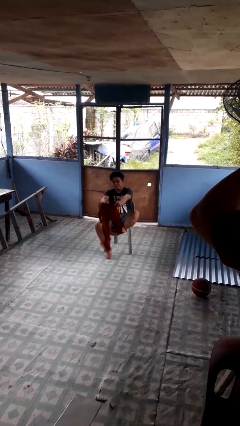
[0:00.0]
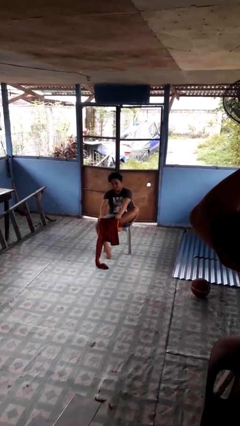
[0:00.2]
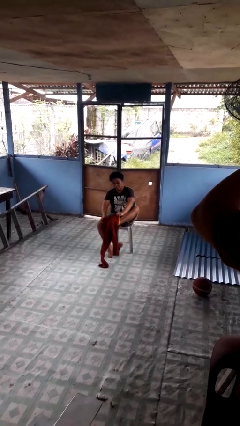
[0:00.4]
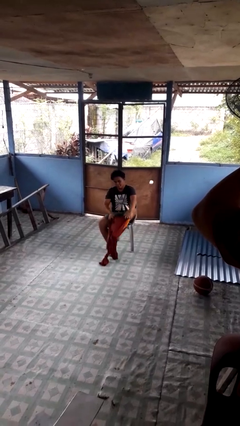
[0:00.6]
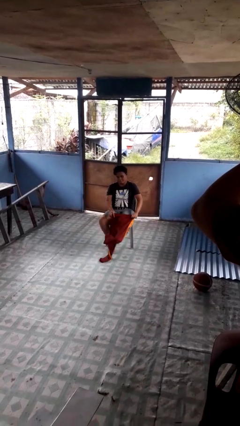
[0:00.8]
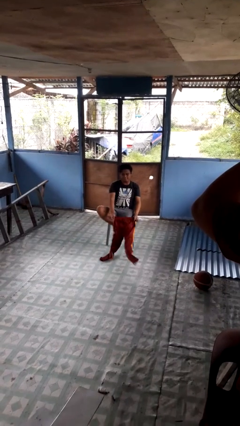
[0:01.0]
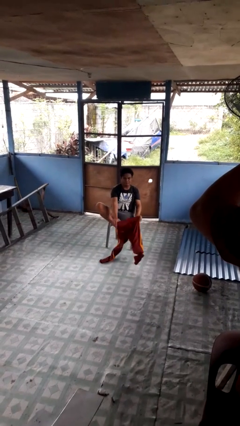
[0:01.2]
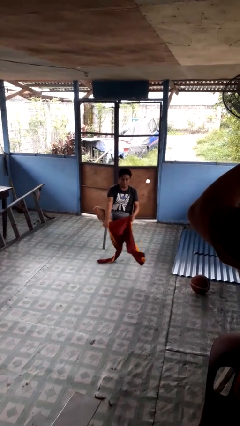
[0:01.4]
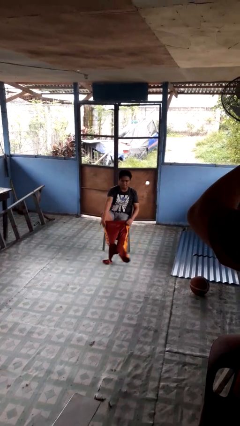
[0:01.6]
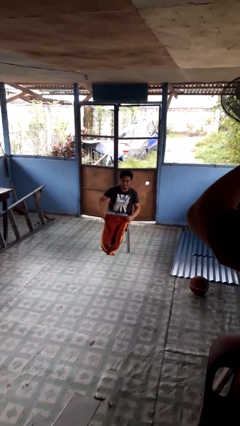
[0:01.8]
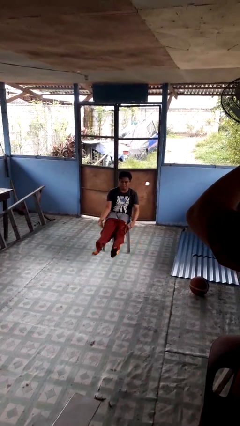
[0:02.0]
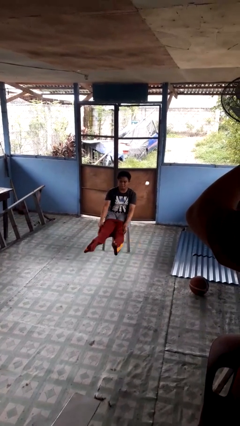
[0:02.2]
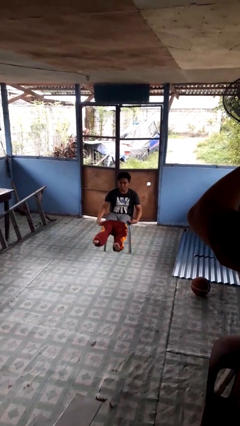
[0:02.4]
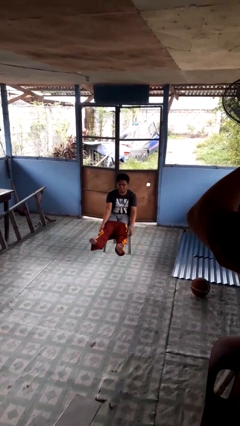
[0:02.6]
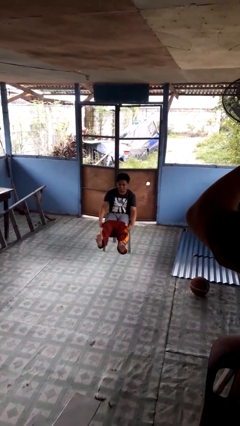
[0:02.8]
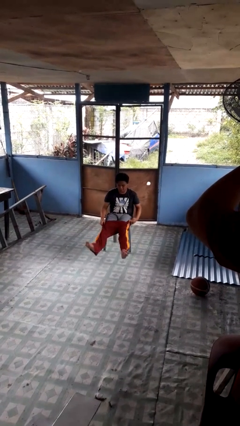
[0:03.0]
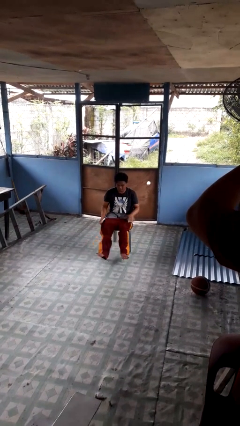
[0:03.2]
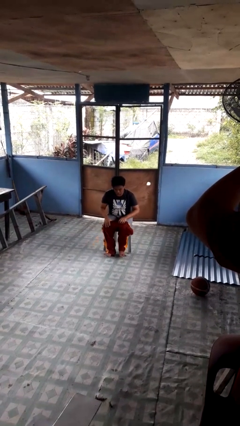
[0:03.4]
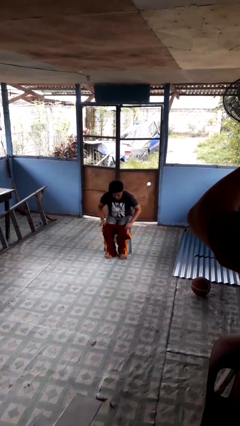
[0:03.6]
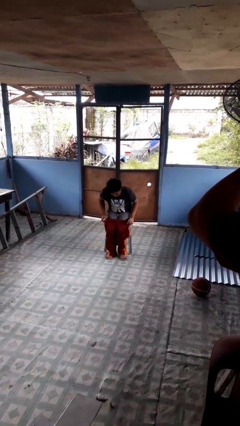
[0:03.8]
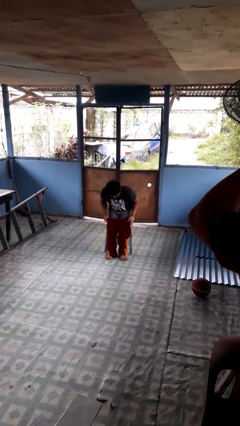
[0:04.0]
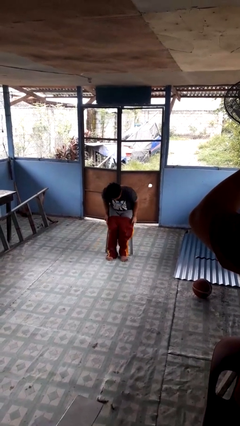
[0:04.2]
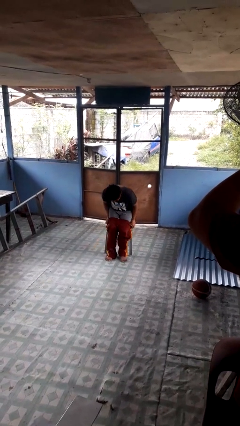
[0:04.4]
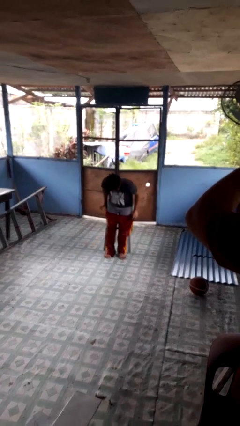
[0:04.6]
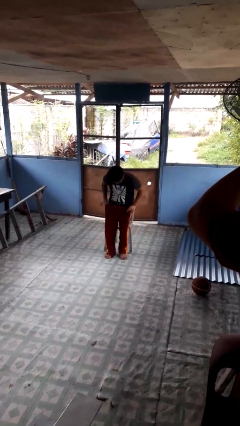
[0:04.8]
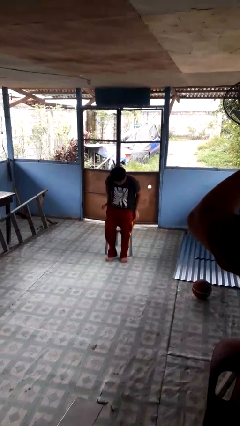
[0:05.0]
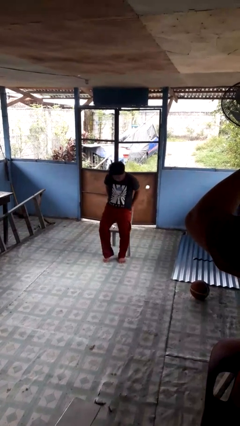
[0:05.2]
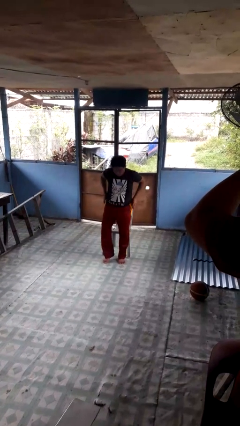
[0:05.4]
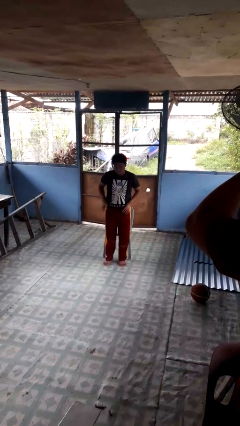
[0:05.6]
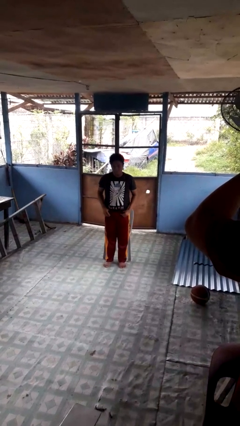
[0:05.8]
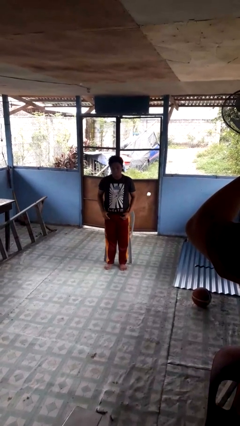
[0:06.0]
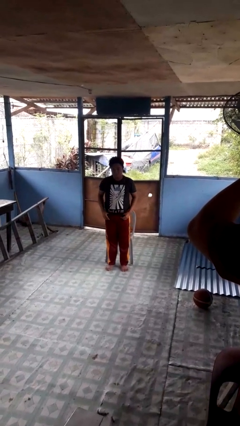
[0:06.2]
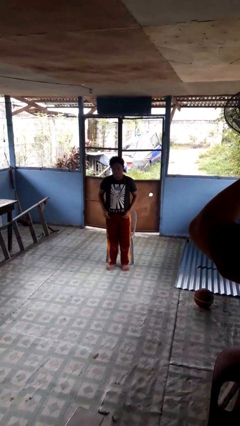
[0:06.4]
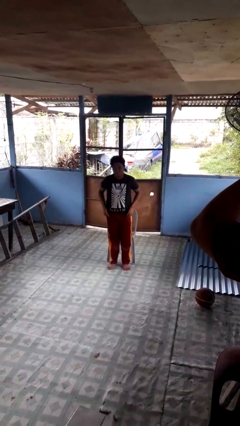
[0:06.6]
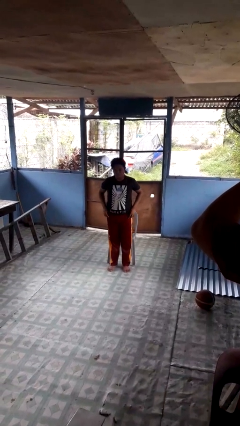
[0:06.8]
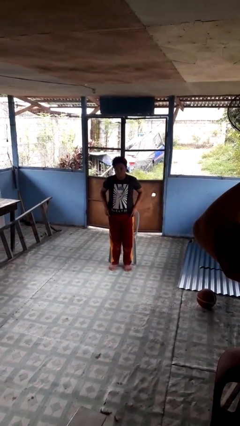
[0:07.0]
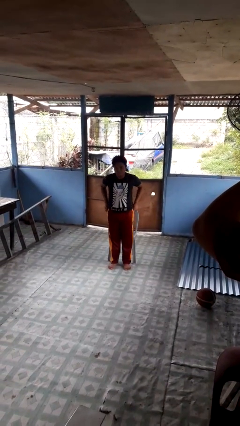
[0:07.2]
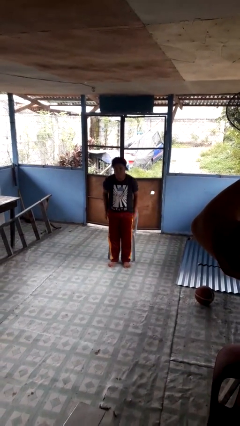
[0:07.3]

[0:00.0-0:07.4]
person puts on pants

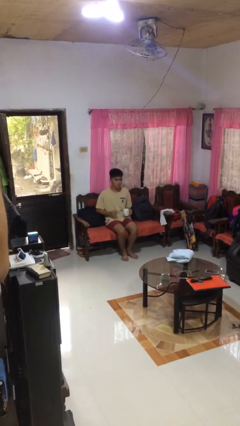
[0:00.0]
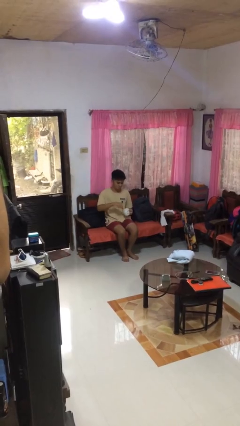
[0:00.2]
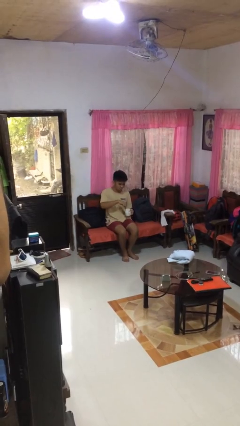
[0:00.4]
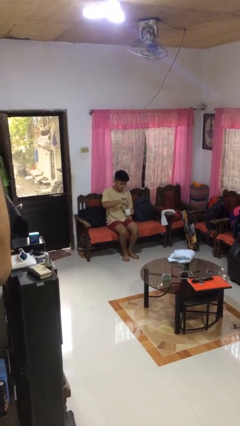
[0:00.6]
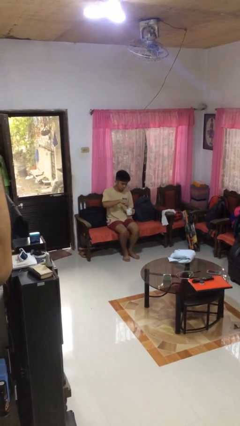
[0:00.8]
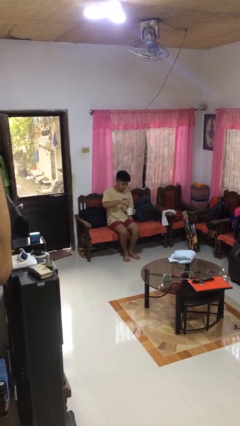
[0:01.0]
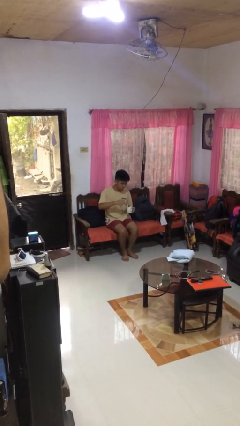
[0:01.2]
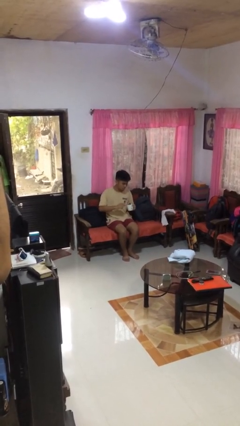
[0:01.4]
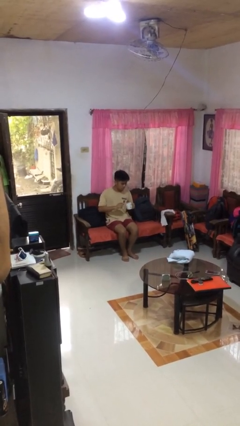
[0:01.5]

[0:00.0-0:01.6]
person stirs mug

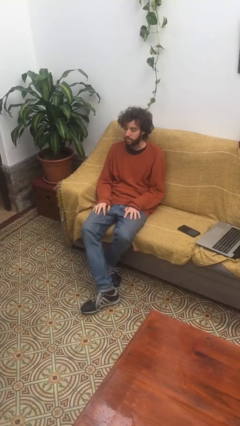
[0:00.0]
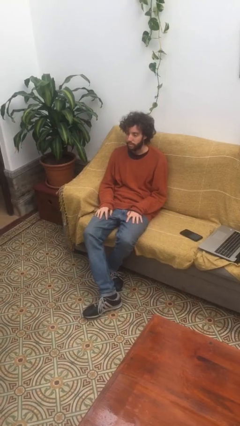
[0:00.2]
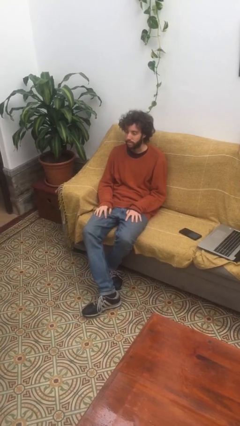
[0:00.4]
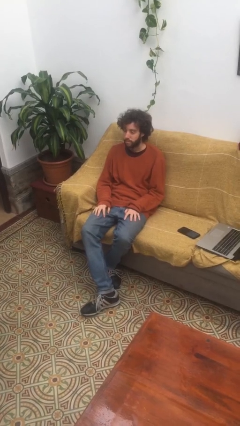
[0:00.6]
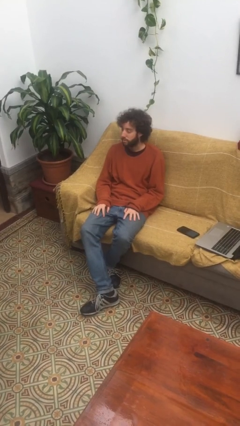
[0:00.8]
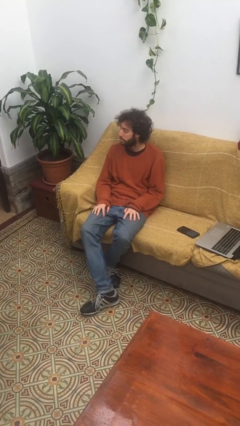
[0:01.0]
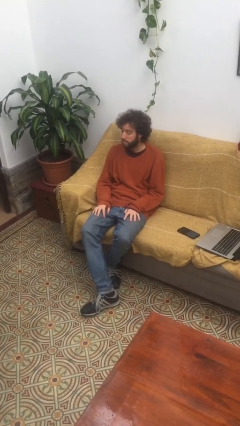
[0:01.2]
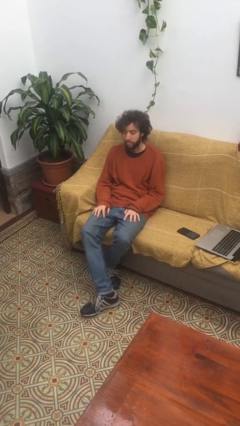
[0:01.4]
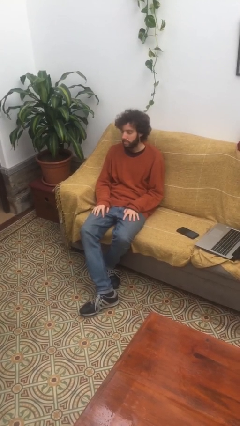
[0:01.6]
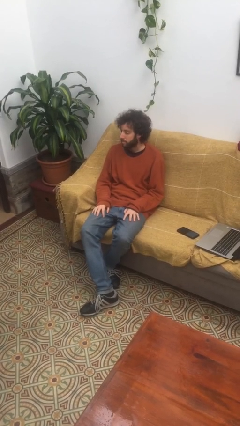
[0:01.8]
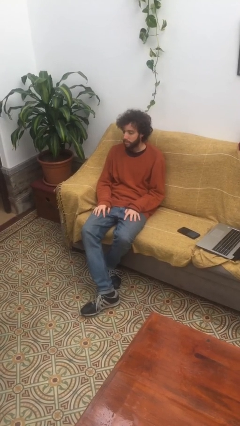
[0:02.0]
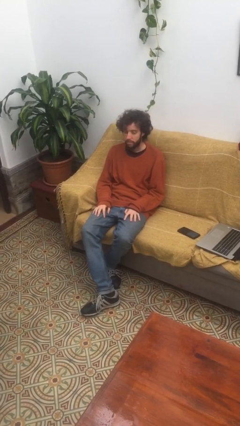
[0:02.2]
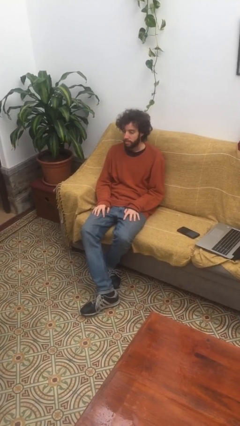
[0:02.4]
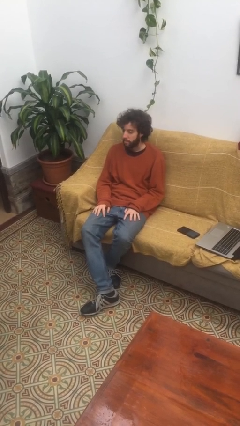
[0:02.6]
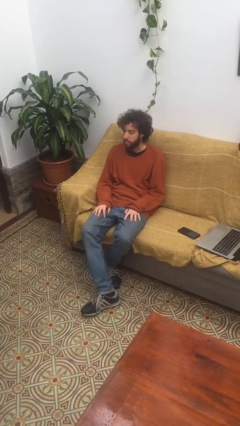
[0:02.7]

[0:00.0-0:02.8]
person shakes head

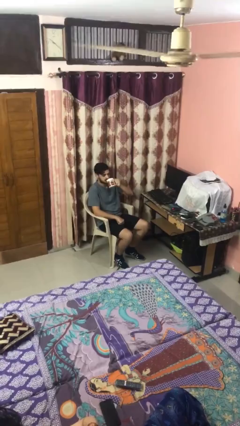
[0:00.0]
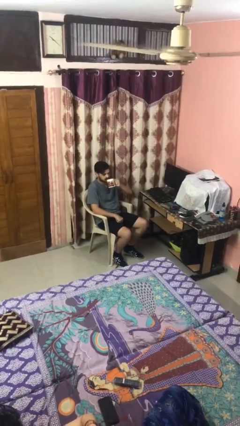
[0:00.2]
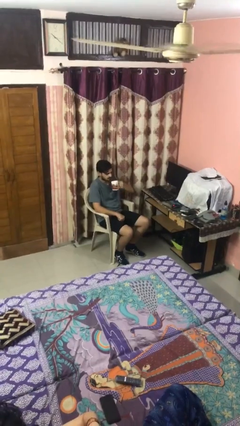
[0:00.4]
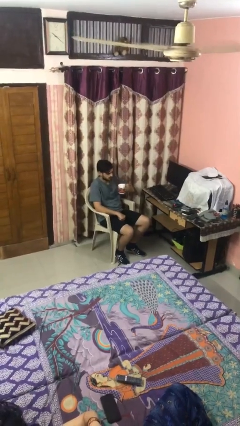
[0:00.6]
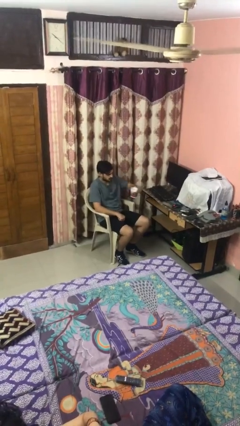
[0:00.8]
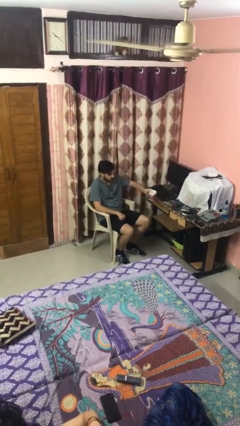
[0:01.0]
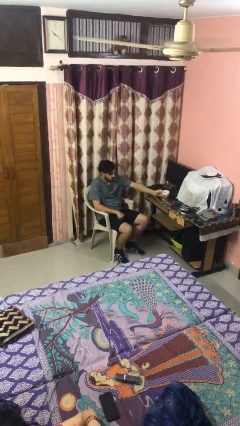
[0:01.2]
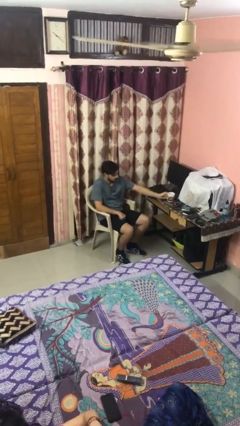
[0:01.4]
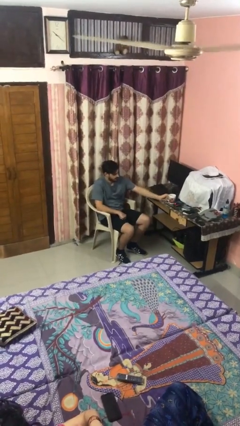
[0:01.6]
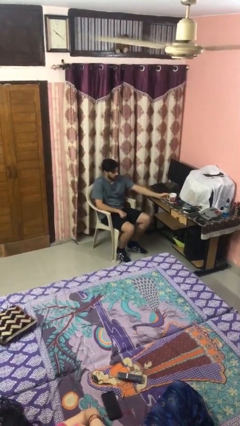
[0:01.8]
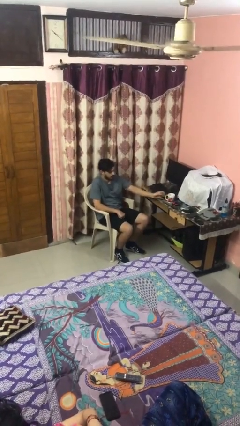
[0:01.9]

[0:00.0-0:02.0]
person puts down object on table

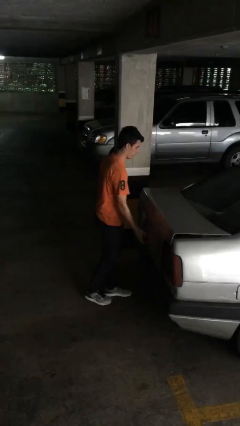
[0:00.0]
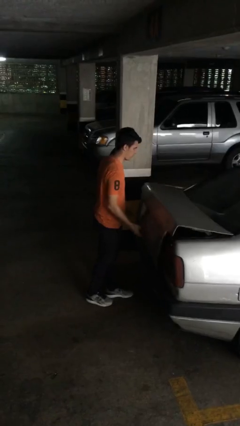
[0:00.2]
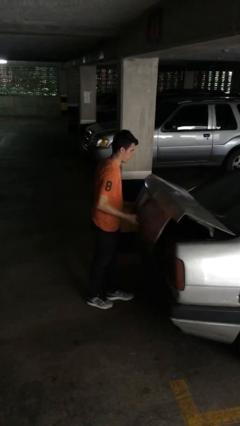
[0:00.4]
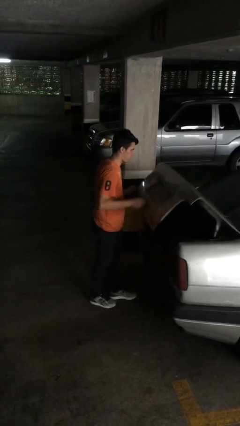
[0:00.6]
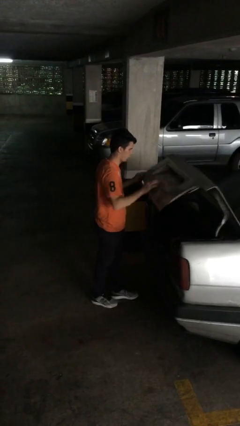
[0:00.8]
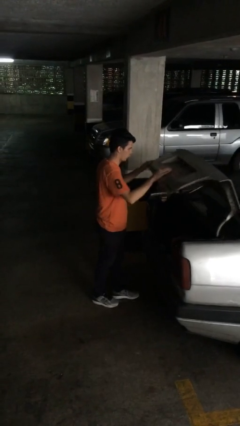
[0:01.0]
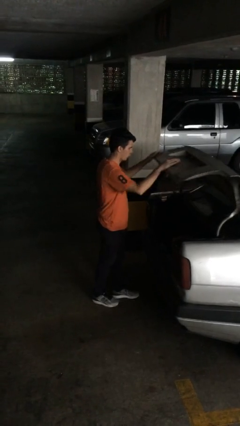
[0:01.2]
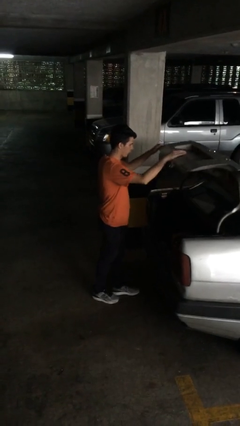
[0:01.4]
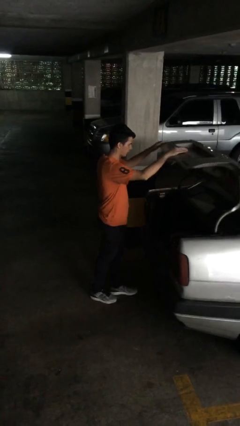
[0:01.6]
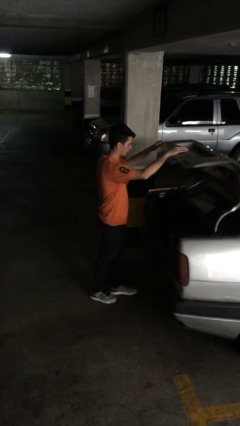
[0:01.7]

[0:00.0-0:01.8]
person opens car trunk

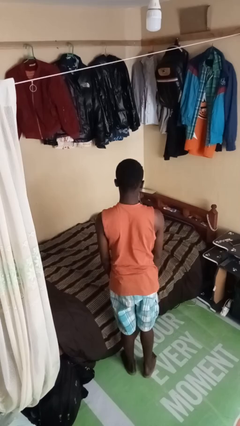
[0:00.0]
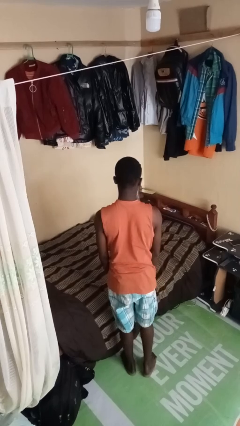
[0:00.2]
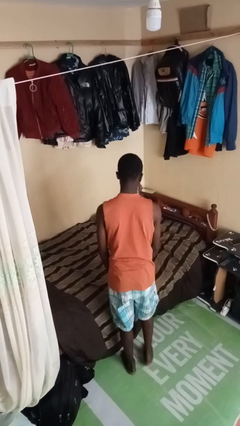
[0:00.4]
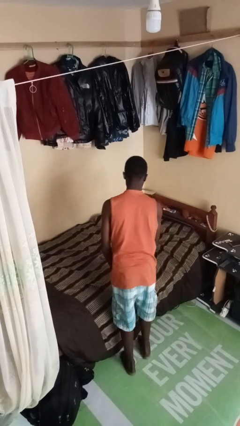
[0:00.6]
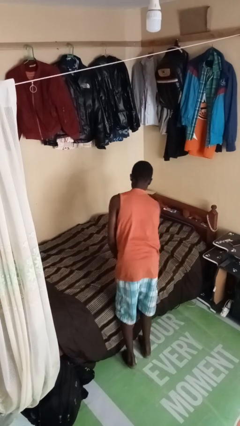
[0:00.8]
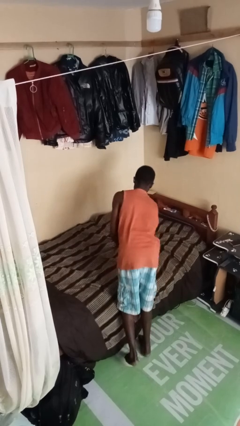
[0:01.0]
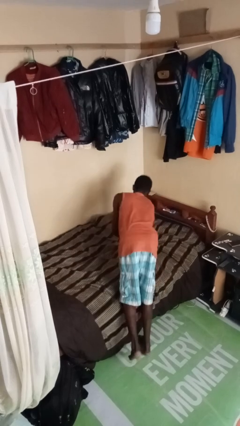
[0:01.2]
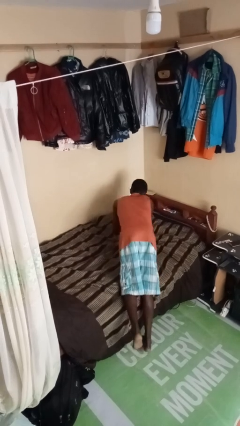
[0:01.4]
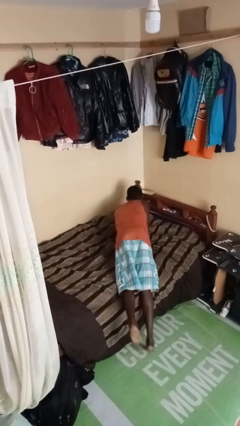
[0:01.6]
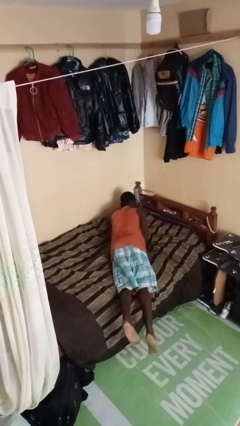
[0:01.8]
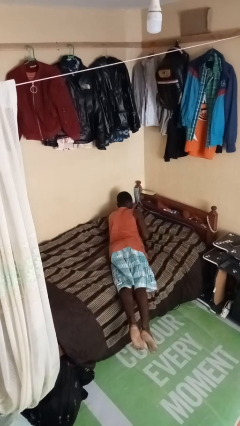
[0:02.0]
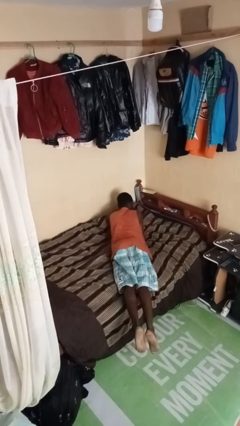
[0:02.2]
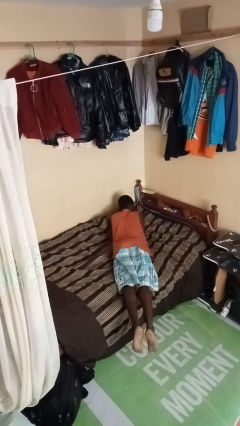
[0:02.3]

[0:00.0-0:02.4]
person lies down on bed
